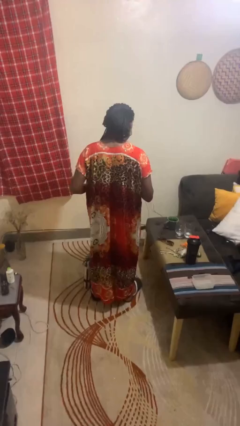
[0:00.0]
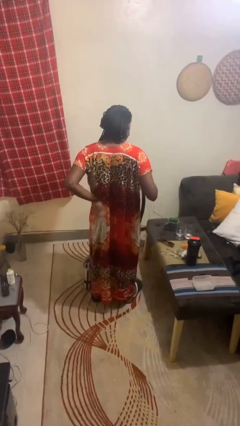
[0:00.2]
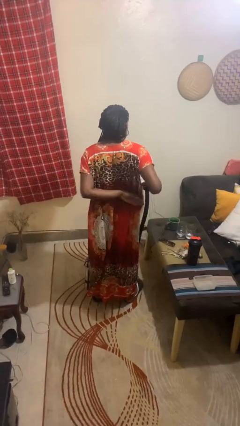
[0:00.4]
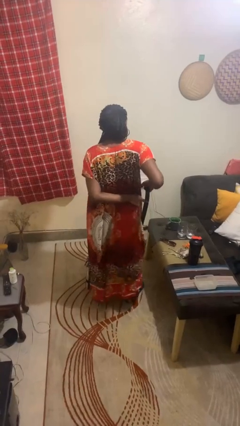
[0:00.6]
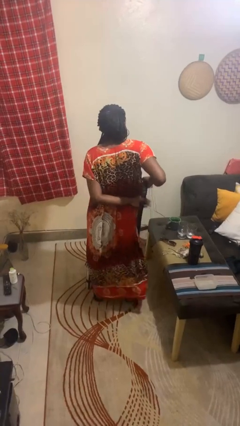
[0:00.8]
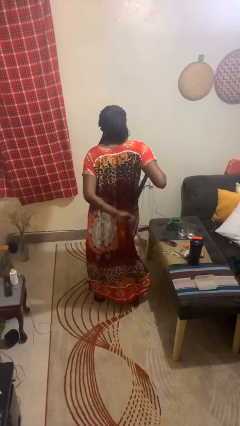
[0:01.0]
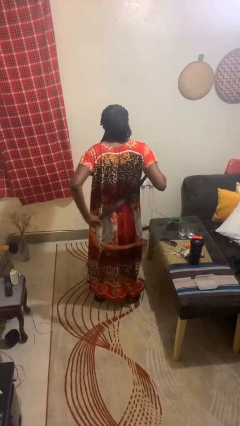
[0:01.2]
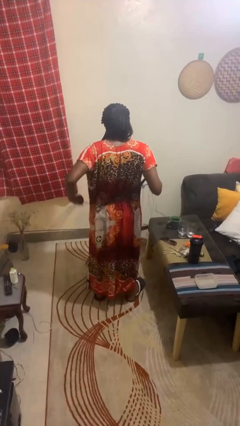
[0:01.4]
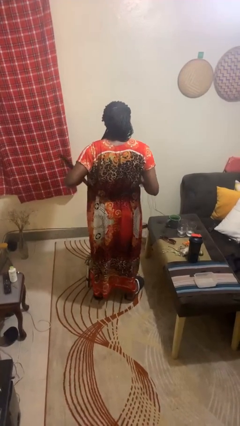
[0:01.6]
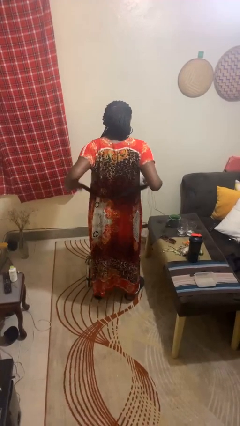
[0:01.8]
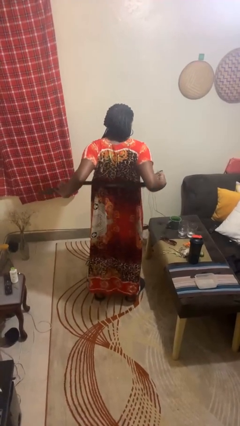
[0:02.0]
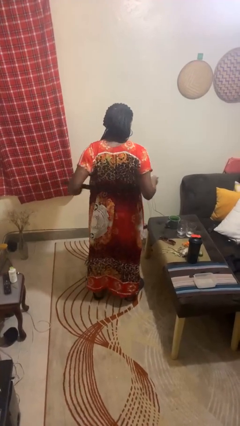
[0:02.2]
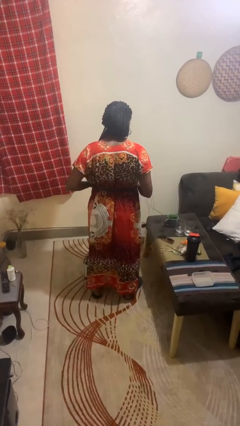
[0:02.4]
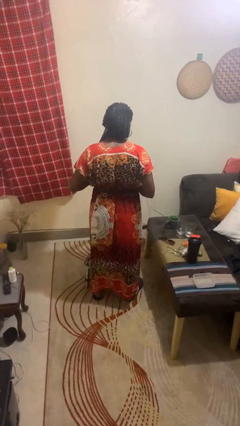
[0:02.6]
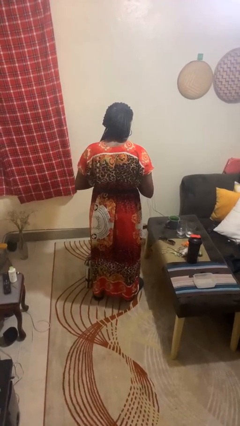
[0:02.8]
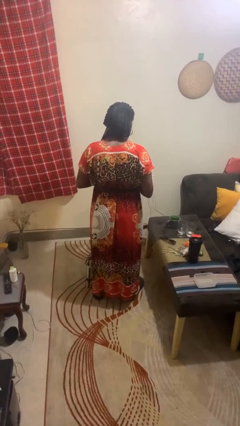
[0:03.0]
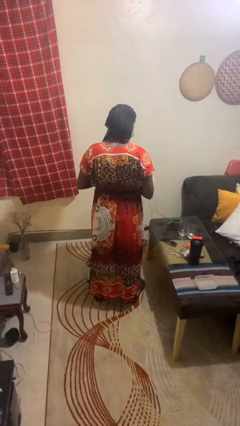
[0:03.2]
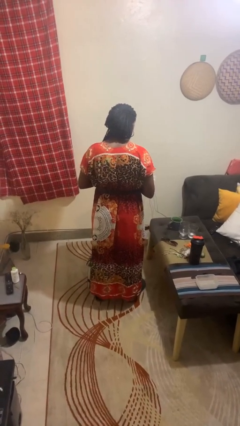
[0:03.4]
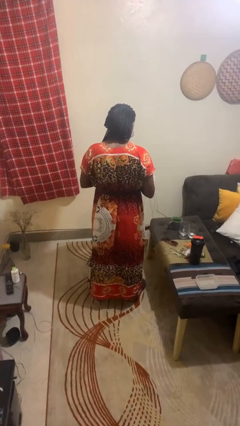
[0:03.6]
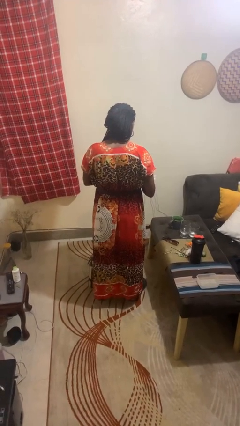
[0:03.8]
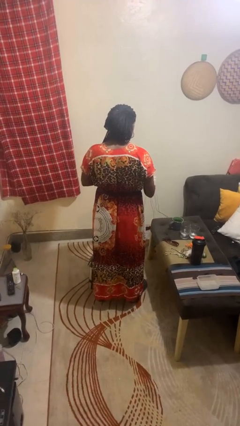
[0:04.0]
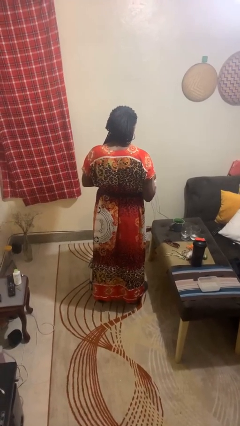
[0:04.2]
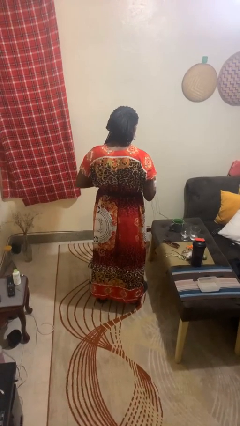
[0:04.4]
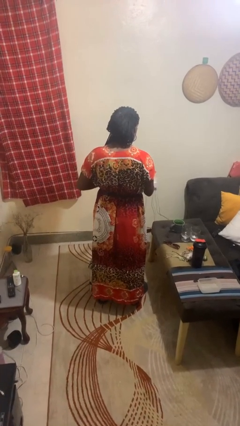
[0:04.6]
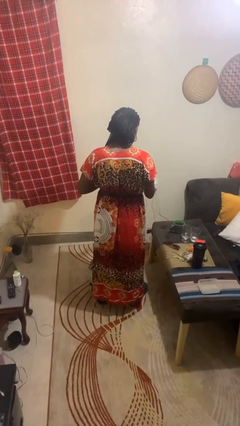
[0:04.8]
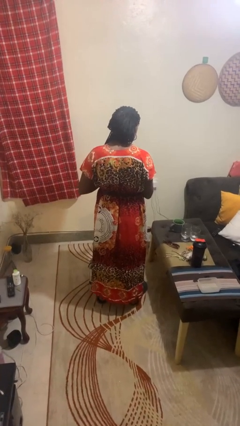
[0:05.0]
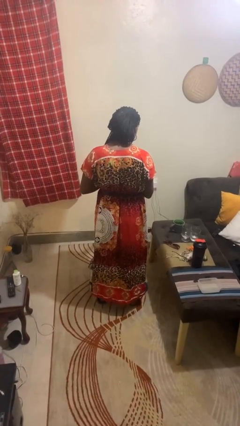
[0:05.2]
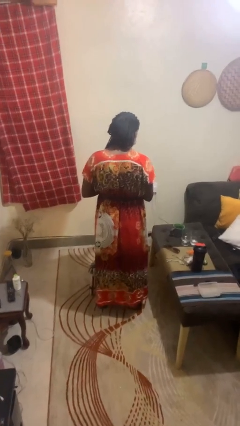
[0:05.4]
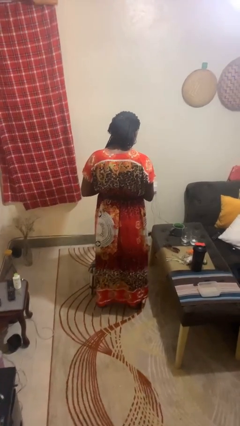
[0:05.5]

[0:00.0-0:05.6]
person puts on belt

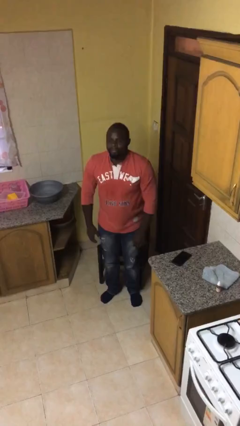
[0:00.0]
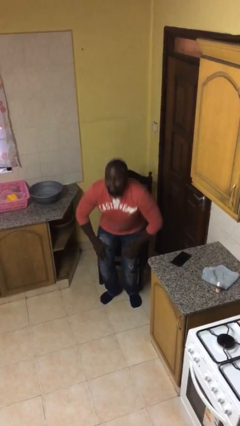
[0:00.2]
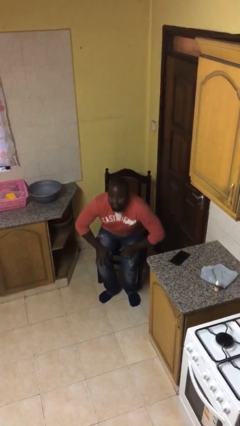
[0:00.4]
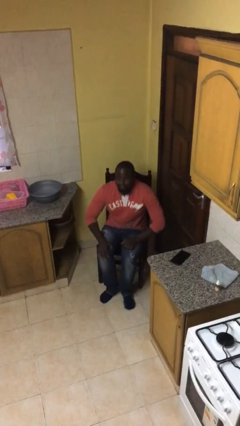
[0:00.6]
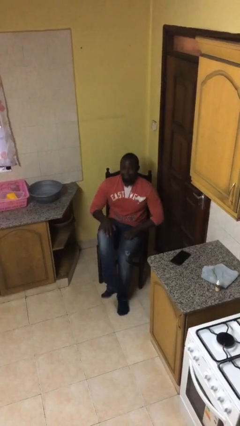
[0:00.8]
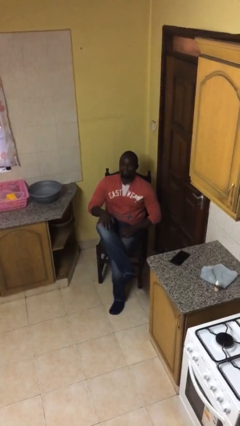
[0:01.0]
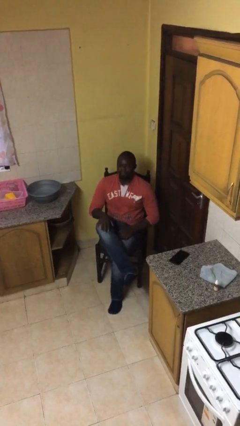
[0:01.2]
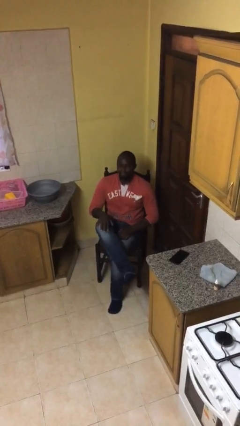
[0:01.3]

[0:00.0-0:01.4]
person sits down

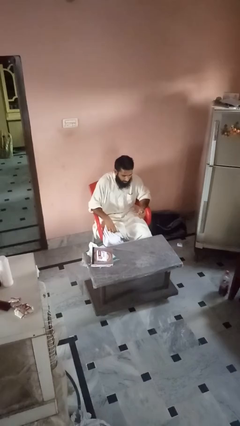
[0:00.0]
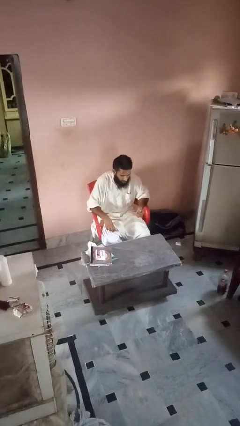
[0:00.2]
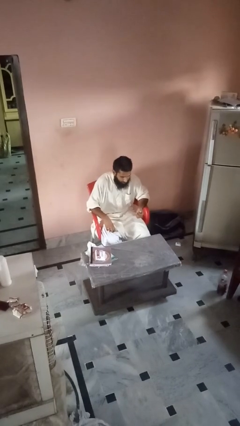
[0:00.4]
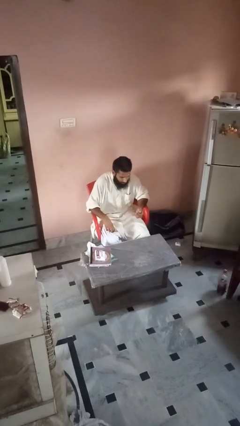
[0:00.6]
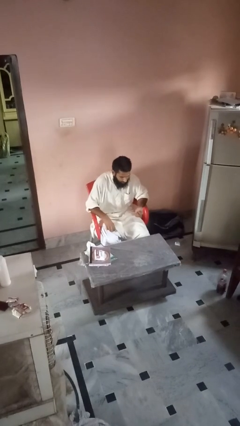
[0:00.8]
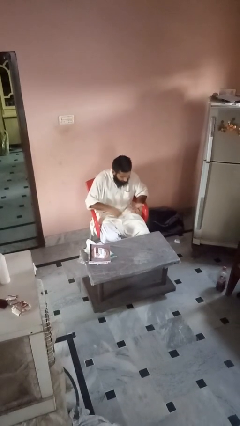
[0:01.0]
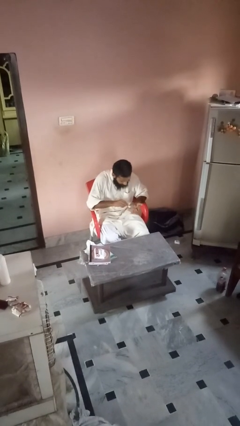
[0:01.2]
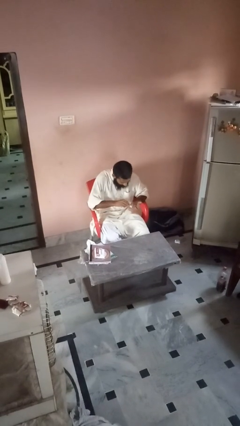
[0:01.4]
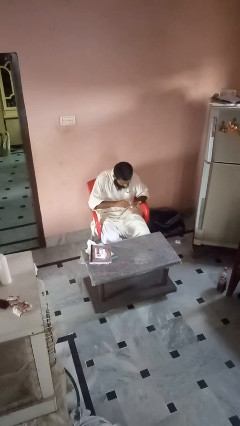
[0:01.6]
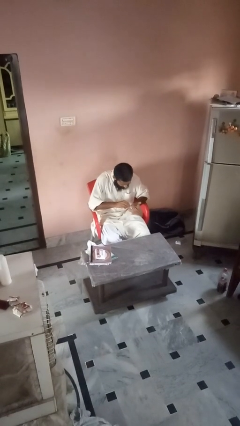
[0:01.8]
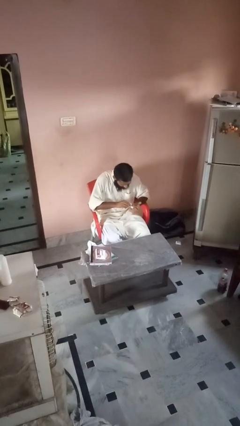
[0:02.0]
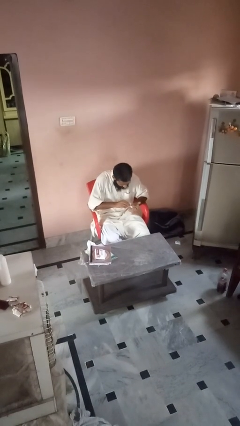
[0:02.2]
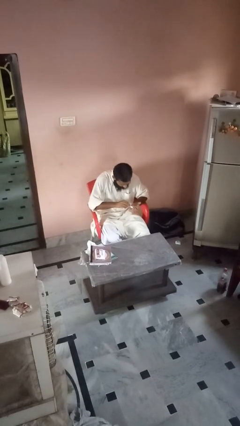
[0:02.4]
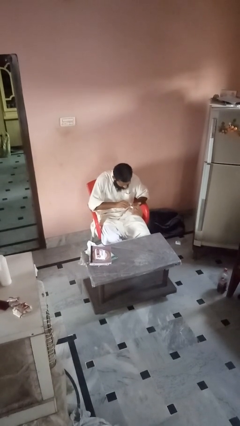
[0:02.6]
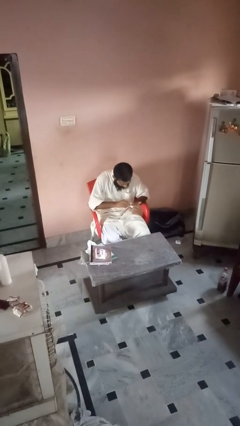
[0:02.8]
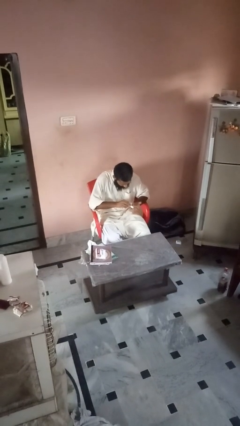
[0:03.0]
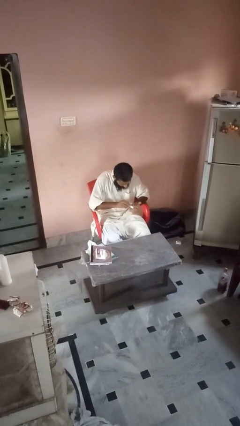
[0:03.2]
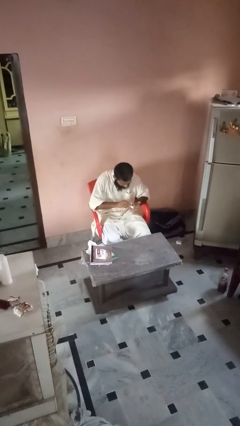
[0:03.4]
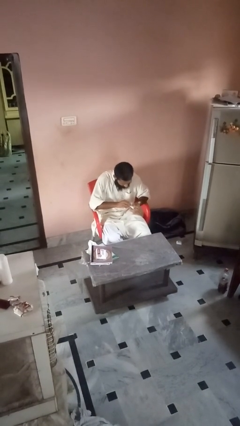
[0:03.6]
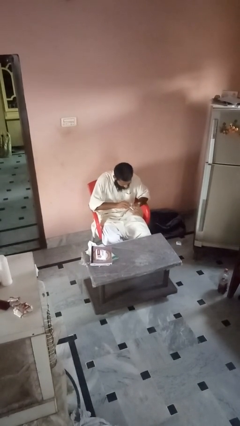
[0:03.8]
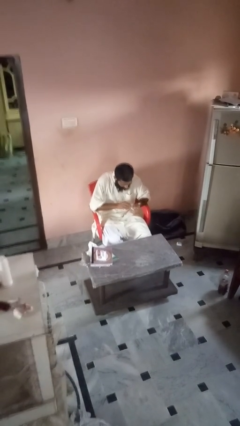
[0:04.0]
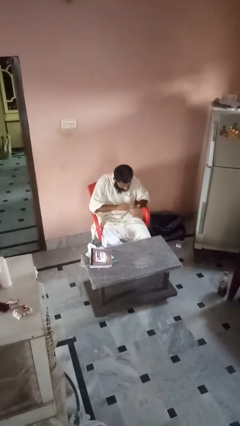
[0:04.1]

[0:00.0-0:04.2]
person clips fingernails

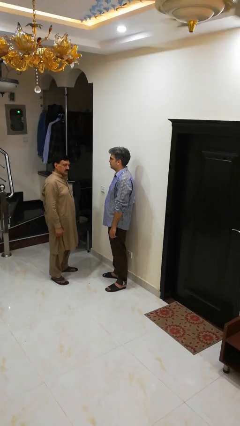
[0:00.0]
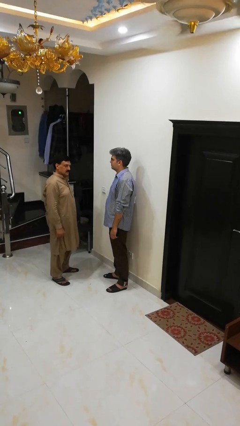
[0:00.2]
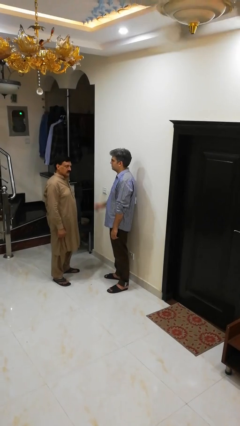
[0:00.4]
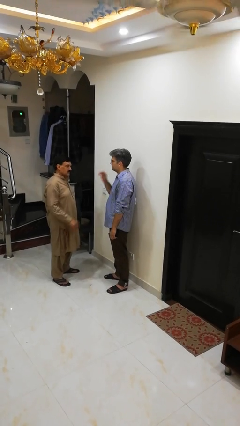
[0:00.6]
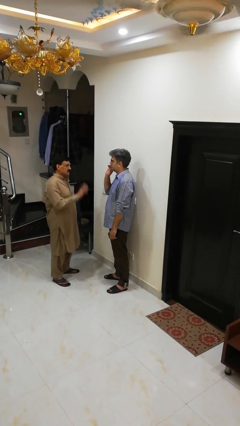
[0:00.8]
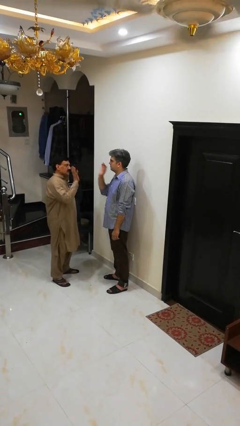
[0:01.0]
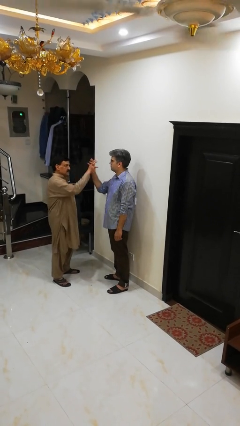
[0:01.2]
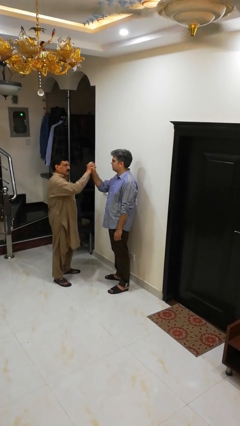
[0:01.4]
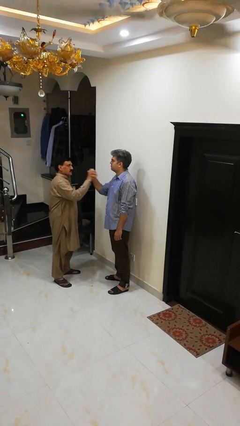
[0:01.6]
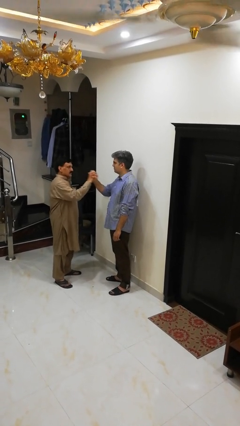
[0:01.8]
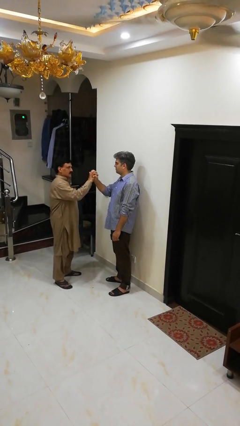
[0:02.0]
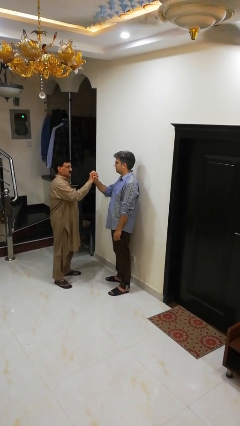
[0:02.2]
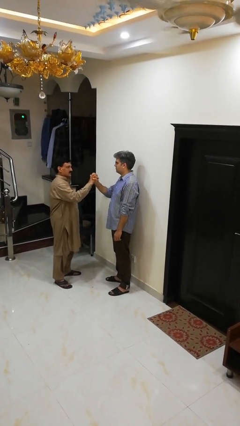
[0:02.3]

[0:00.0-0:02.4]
person highfives hand

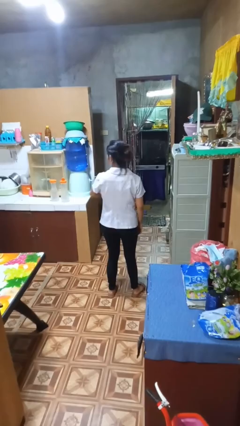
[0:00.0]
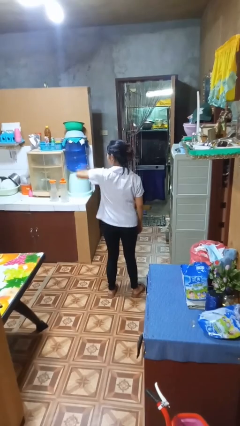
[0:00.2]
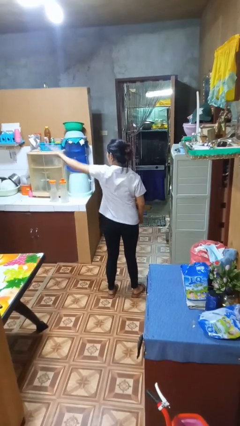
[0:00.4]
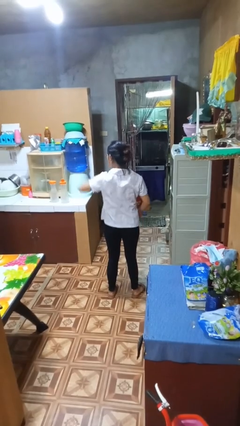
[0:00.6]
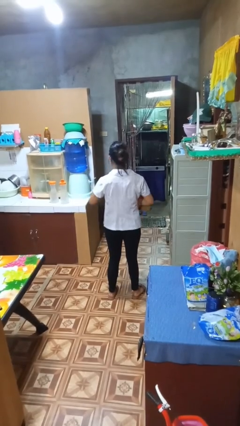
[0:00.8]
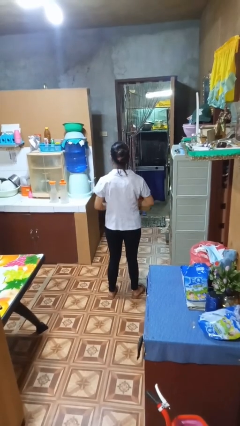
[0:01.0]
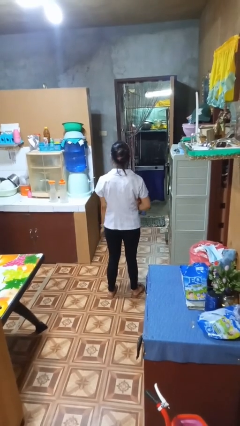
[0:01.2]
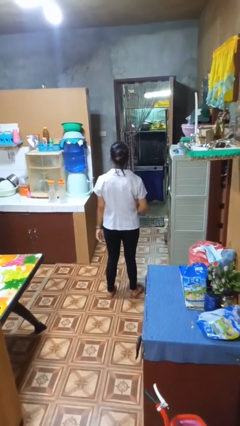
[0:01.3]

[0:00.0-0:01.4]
person karate chop

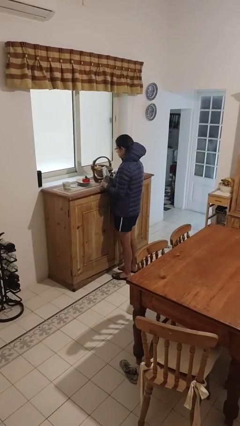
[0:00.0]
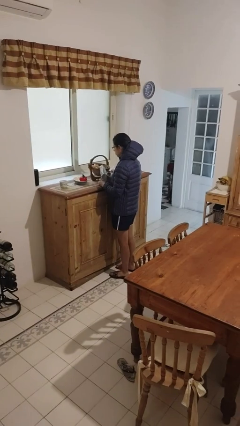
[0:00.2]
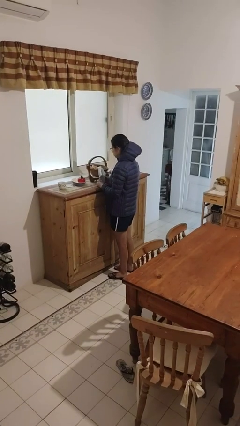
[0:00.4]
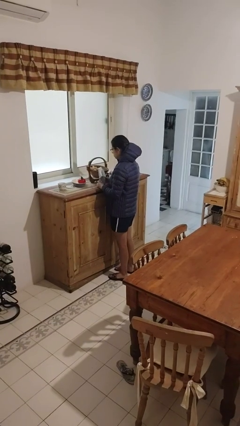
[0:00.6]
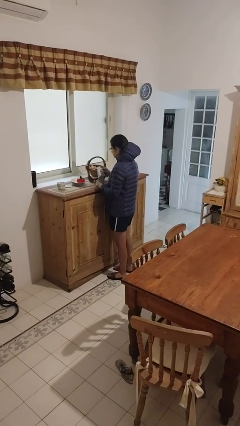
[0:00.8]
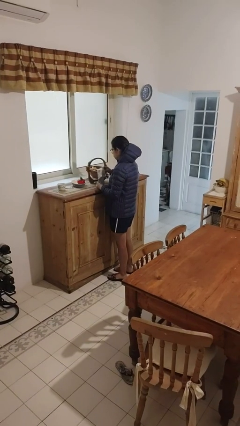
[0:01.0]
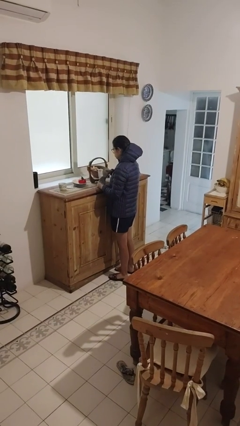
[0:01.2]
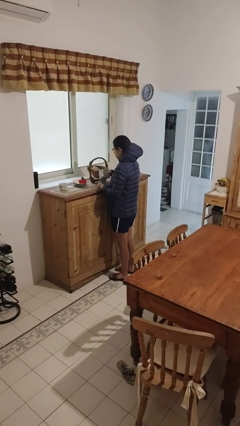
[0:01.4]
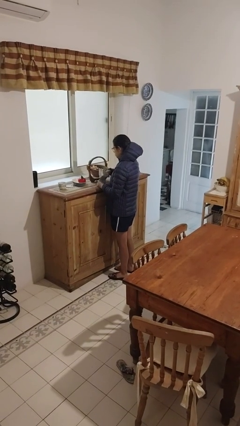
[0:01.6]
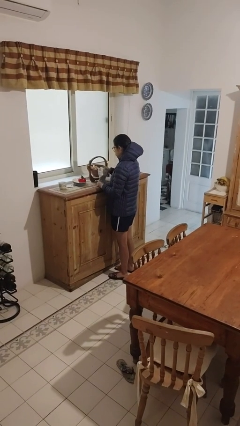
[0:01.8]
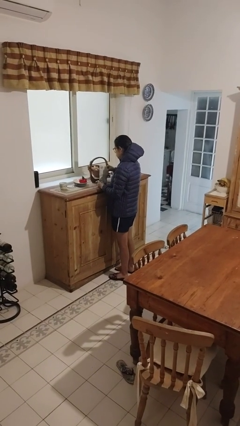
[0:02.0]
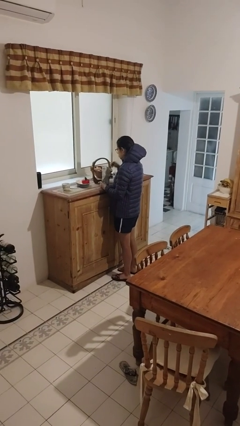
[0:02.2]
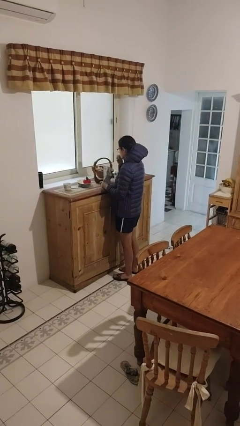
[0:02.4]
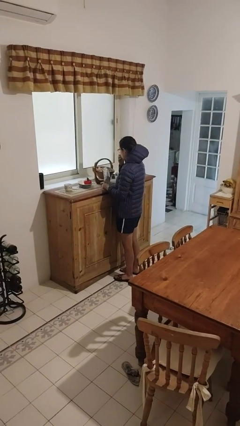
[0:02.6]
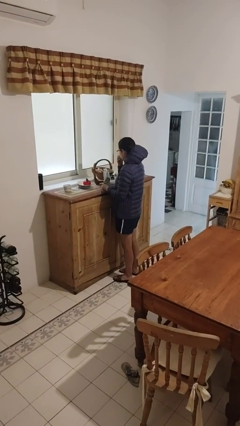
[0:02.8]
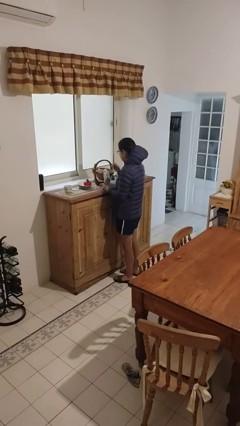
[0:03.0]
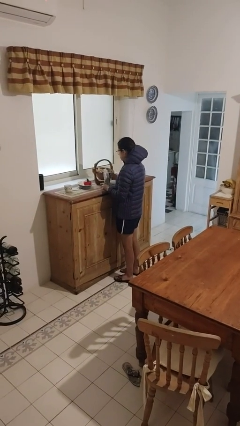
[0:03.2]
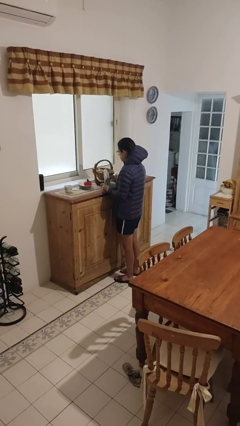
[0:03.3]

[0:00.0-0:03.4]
person eats snack from bag
